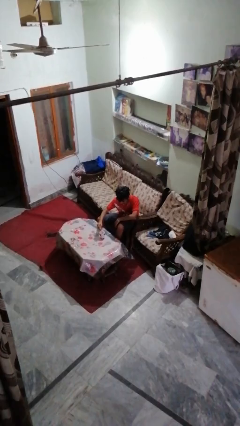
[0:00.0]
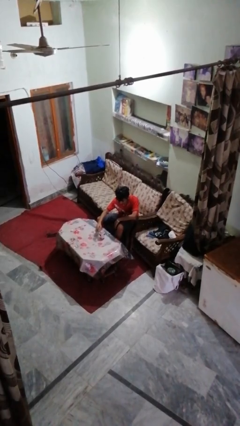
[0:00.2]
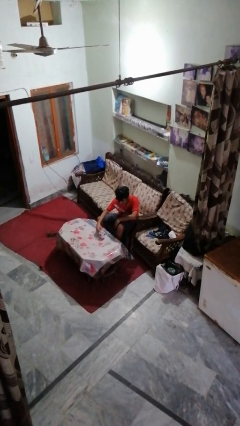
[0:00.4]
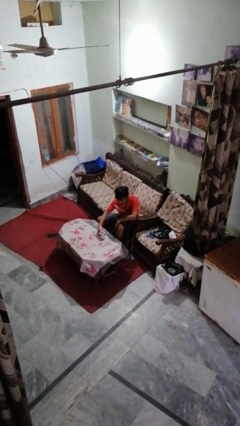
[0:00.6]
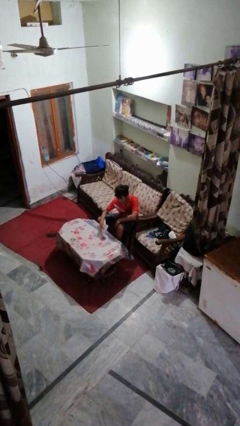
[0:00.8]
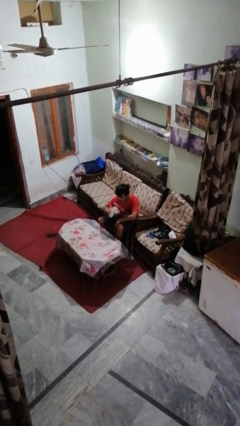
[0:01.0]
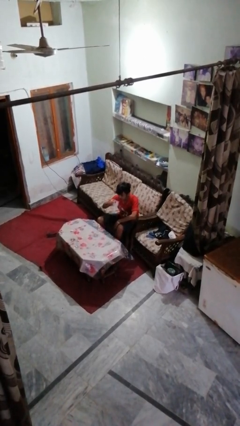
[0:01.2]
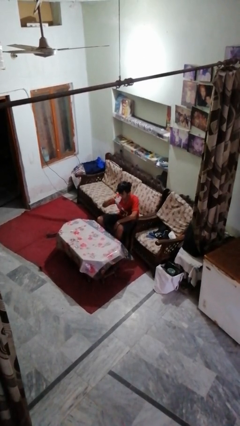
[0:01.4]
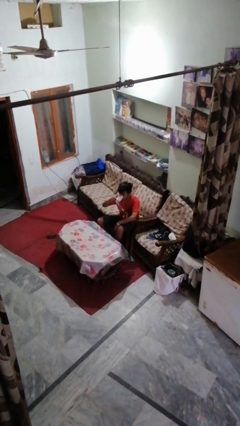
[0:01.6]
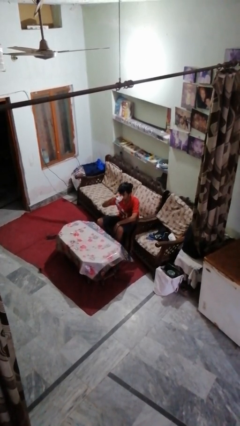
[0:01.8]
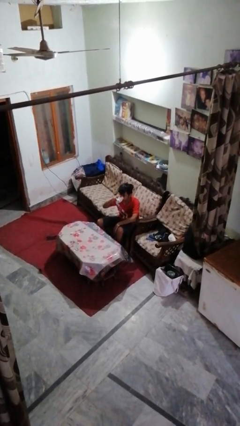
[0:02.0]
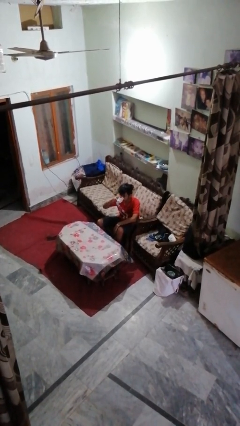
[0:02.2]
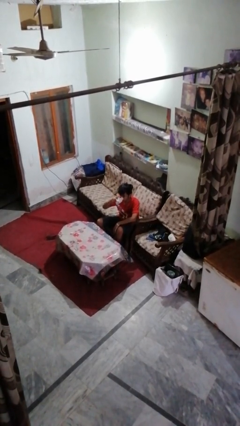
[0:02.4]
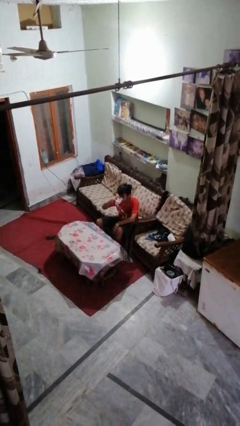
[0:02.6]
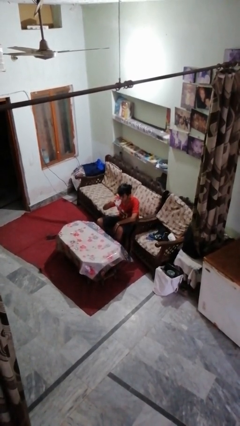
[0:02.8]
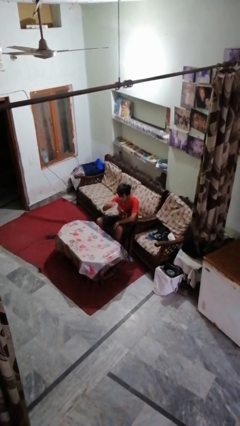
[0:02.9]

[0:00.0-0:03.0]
person drinks from mug

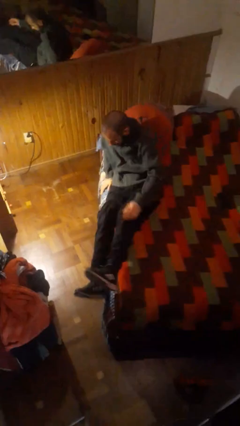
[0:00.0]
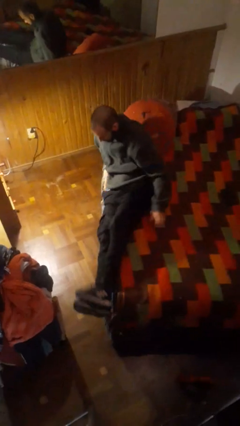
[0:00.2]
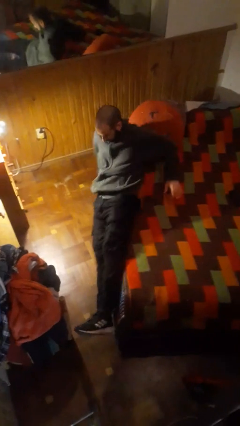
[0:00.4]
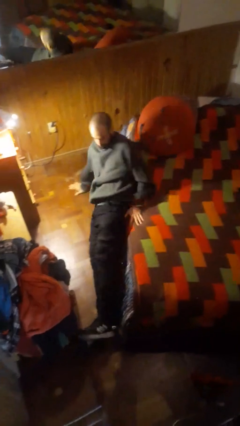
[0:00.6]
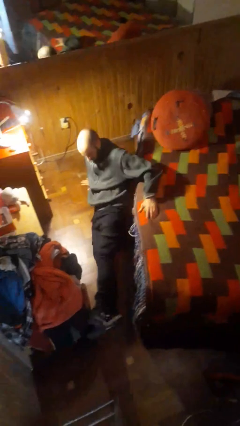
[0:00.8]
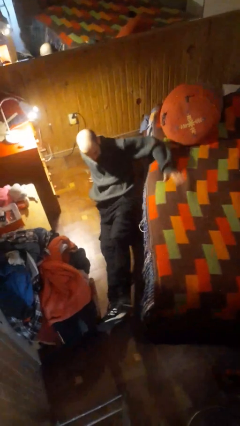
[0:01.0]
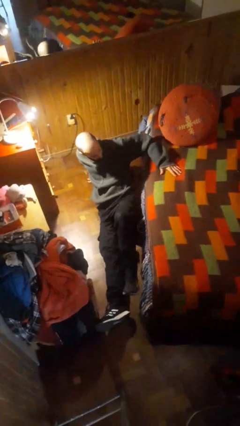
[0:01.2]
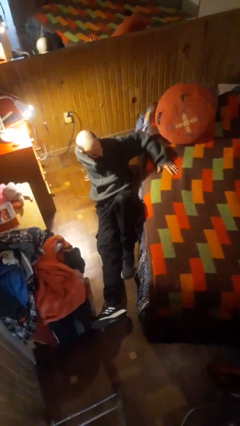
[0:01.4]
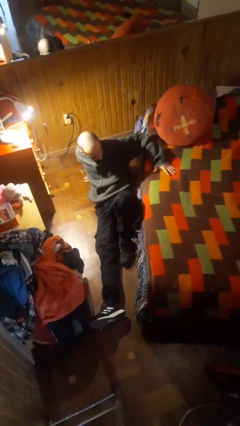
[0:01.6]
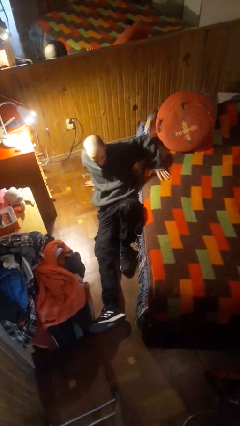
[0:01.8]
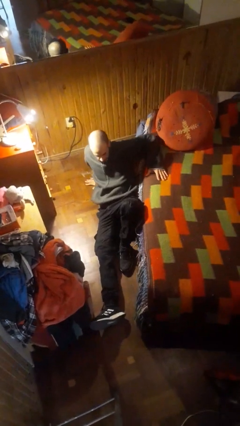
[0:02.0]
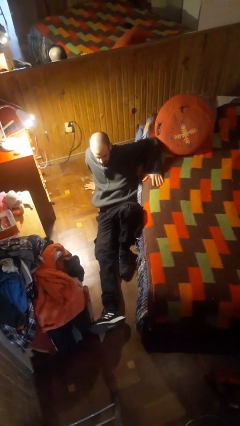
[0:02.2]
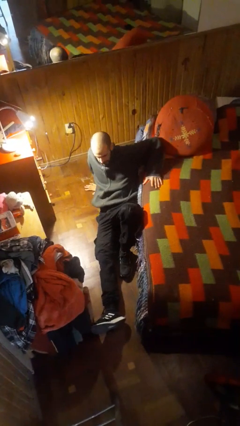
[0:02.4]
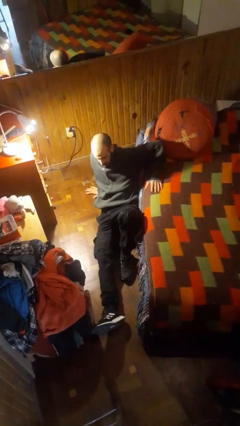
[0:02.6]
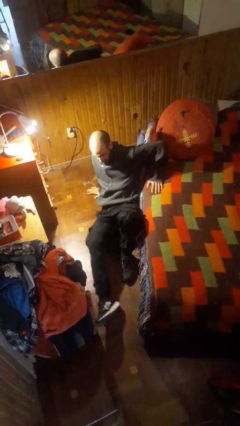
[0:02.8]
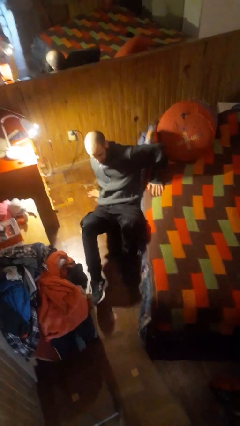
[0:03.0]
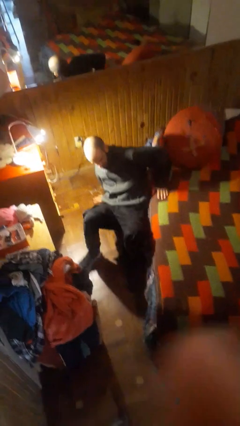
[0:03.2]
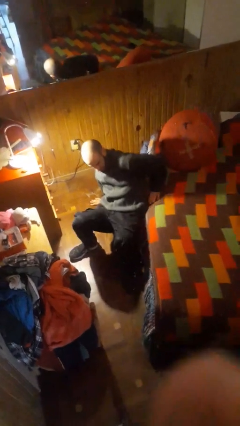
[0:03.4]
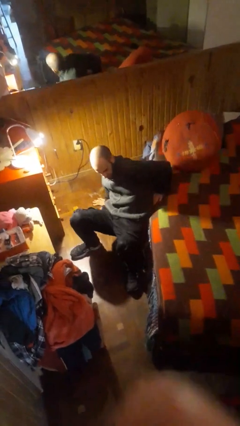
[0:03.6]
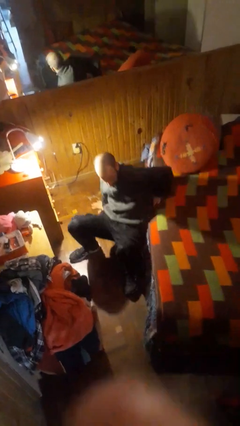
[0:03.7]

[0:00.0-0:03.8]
person falls from bed

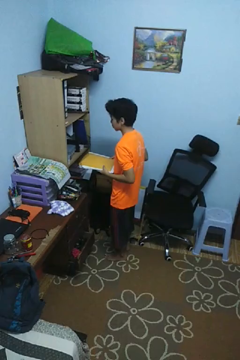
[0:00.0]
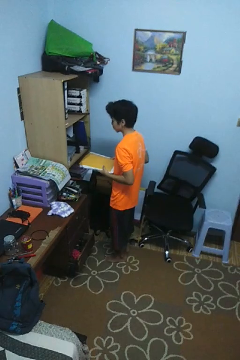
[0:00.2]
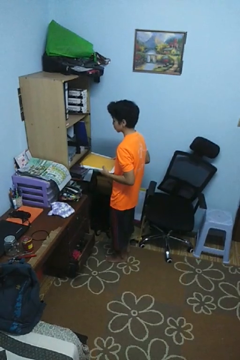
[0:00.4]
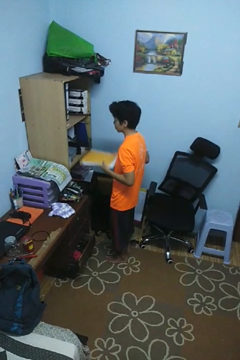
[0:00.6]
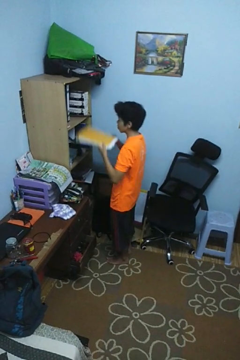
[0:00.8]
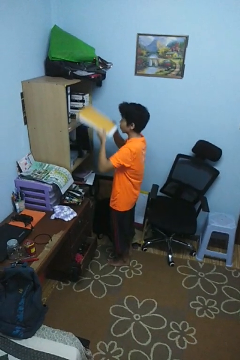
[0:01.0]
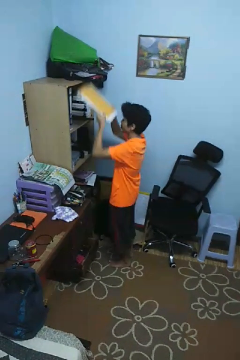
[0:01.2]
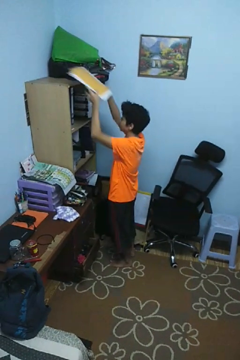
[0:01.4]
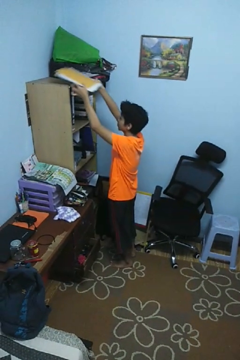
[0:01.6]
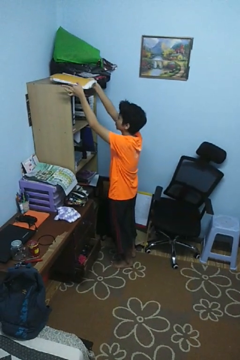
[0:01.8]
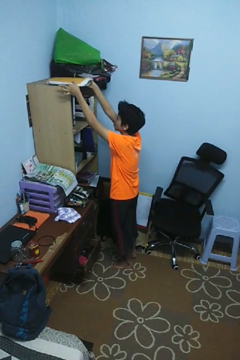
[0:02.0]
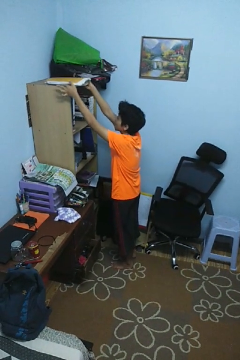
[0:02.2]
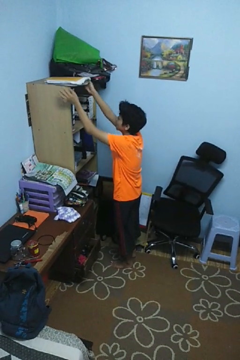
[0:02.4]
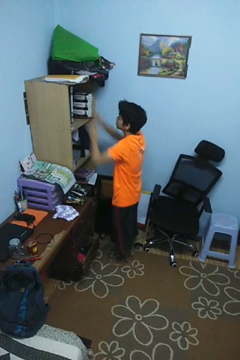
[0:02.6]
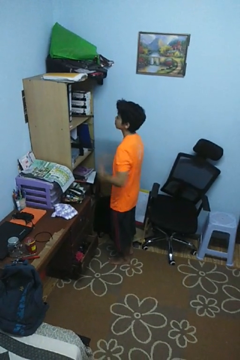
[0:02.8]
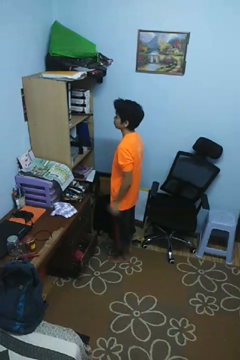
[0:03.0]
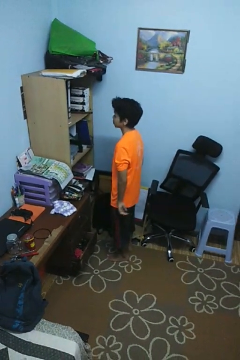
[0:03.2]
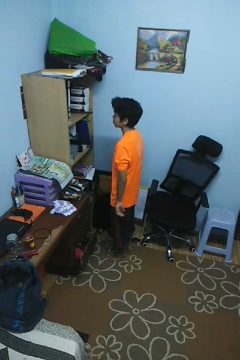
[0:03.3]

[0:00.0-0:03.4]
person puts down object on shelf

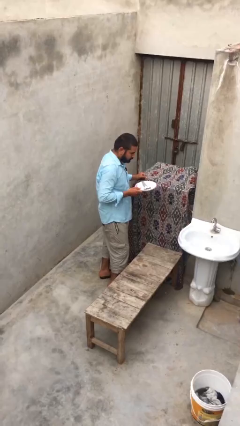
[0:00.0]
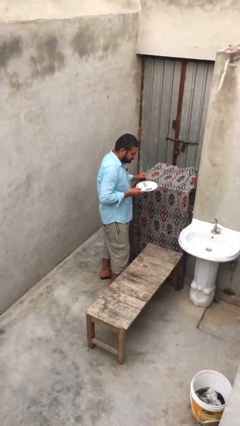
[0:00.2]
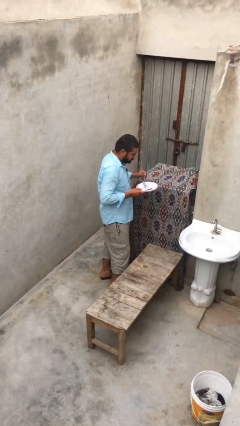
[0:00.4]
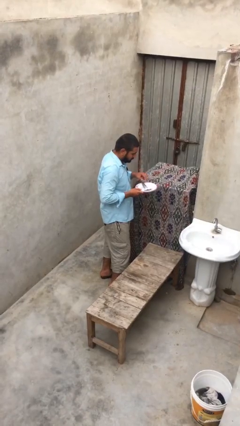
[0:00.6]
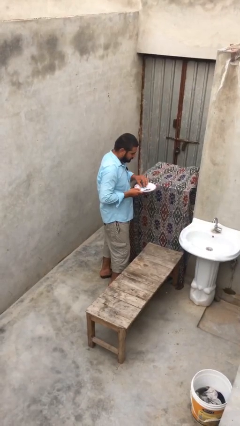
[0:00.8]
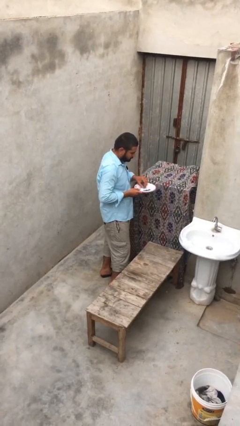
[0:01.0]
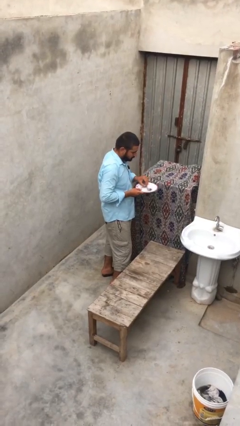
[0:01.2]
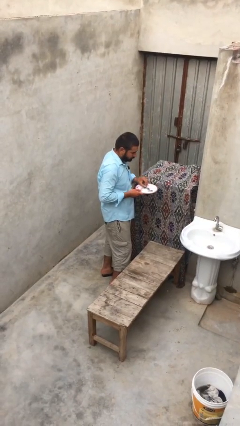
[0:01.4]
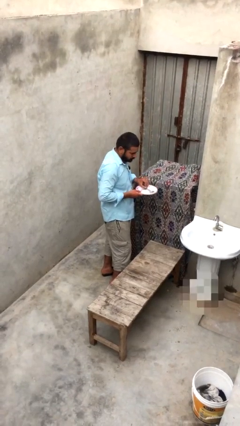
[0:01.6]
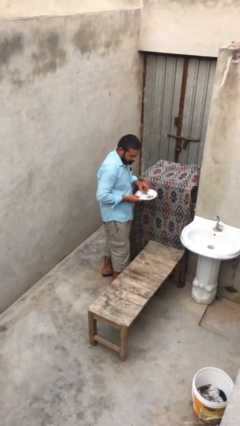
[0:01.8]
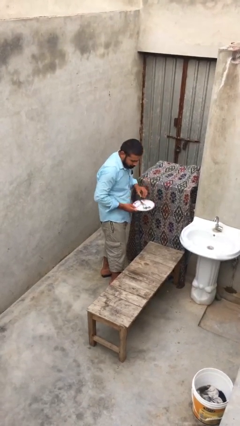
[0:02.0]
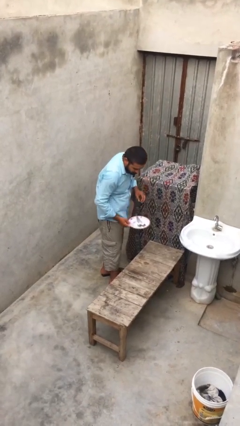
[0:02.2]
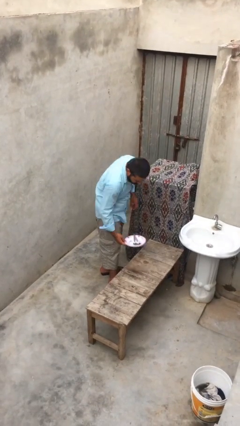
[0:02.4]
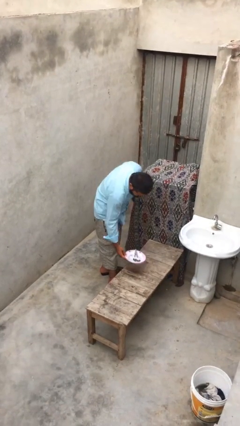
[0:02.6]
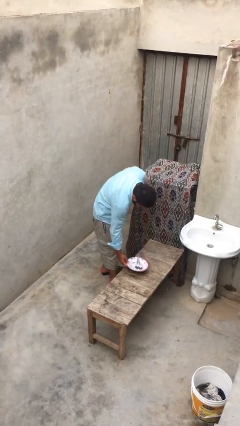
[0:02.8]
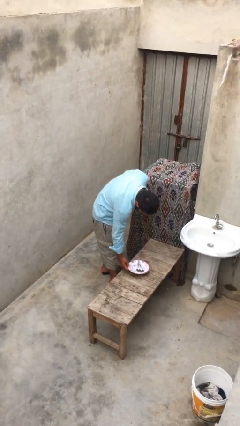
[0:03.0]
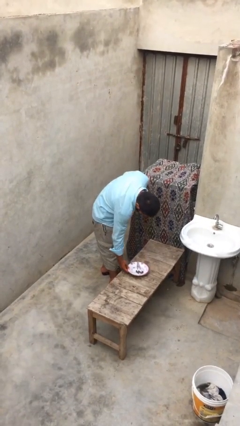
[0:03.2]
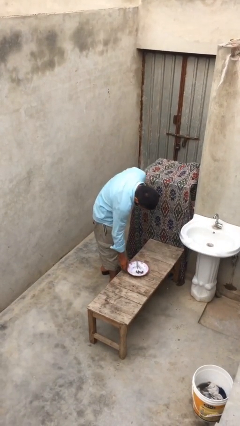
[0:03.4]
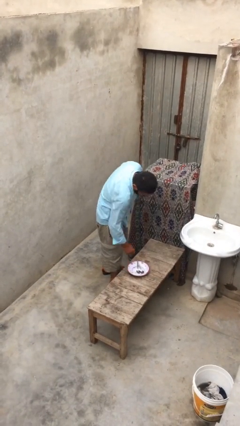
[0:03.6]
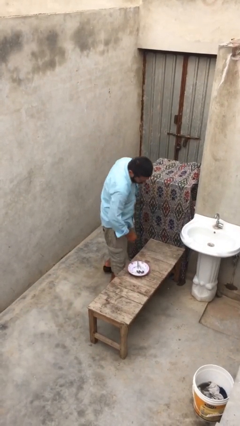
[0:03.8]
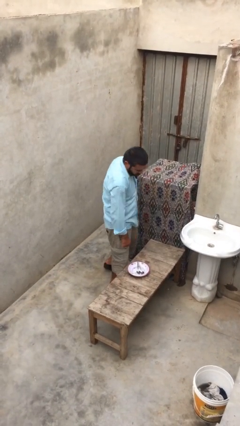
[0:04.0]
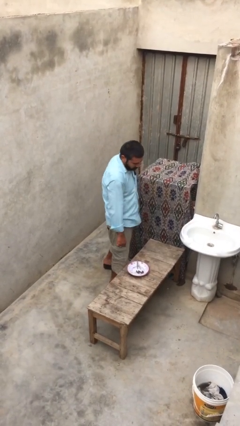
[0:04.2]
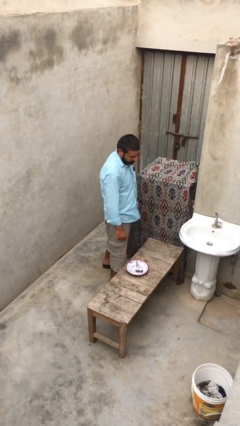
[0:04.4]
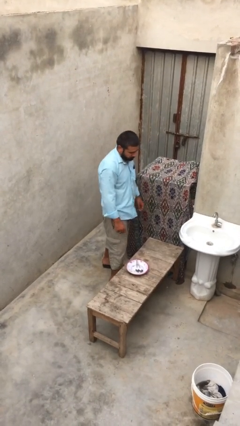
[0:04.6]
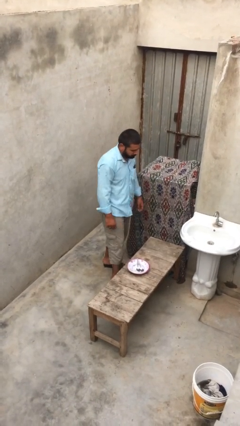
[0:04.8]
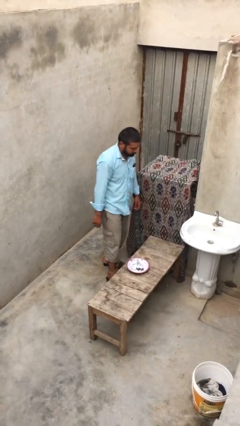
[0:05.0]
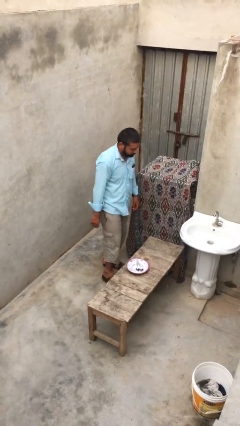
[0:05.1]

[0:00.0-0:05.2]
person puts down object on table

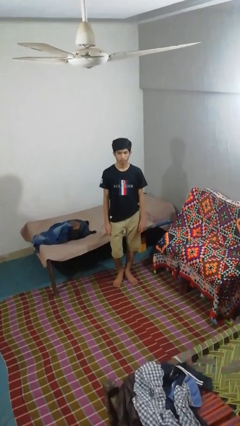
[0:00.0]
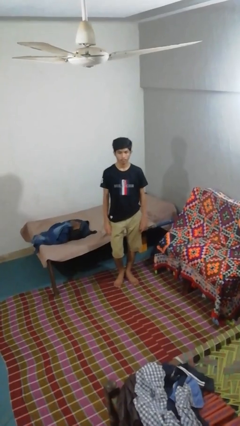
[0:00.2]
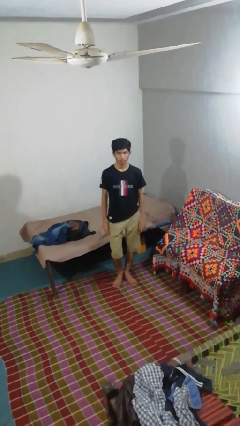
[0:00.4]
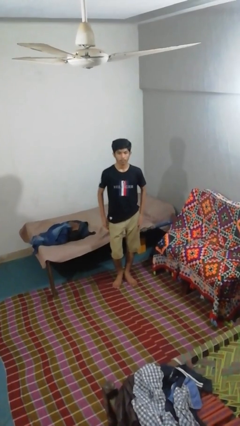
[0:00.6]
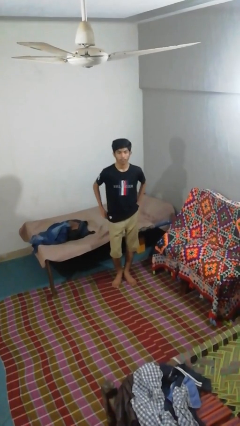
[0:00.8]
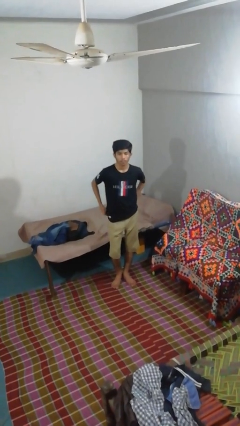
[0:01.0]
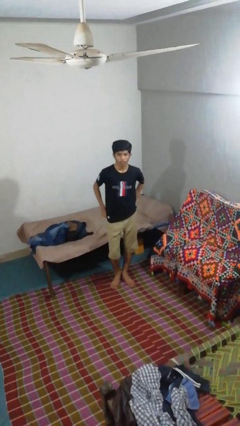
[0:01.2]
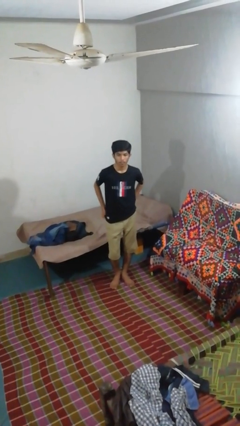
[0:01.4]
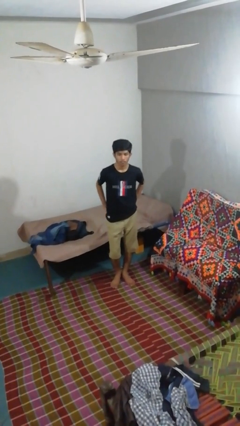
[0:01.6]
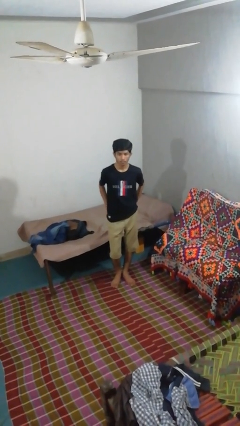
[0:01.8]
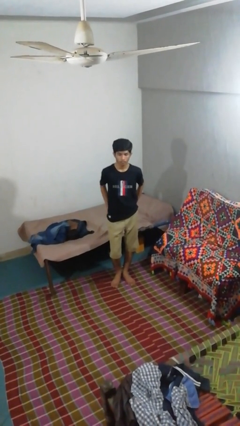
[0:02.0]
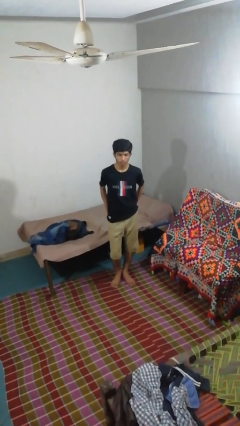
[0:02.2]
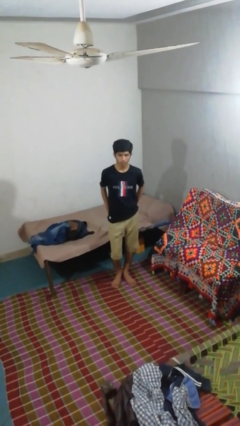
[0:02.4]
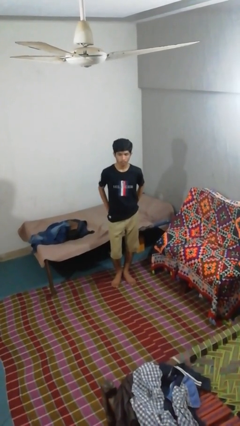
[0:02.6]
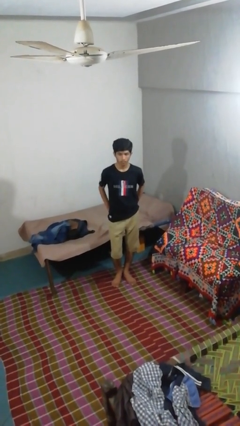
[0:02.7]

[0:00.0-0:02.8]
person puts hands in back pockets
